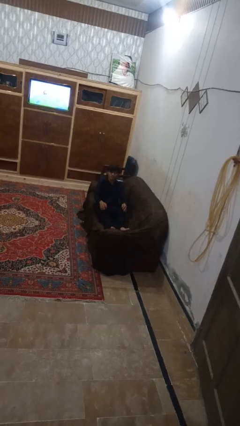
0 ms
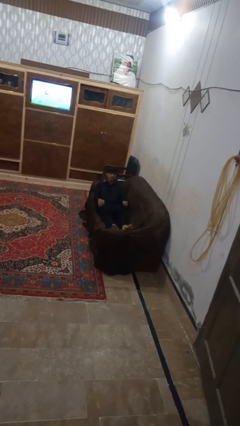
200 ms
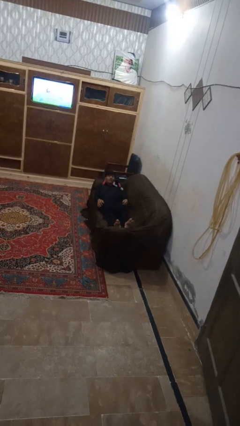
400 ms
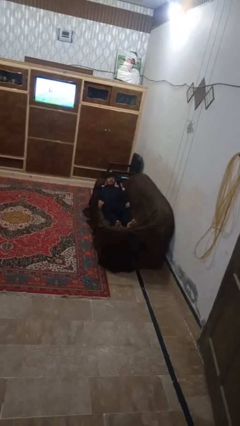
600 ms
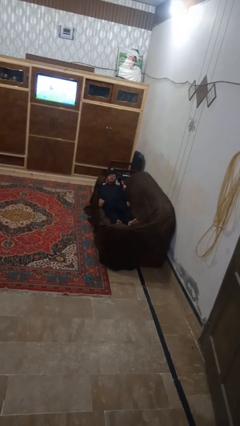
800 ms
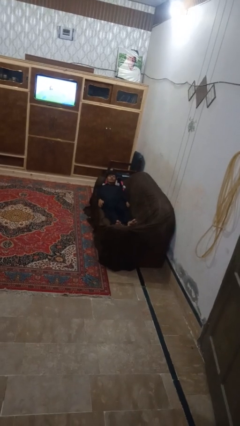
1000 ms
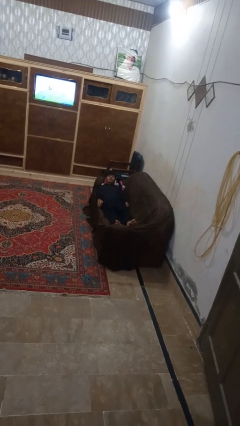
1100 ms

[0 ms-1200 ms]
person lies down on couch

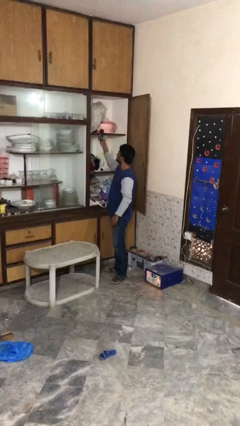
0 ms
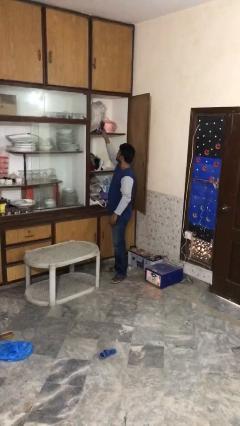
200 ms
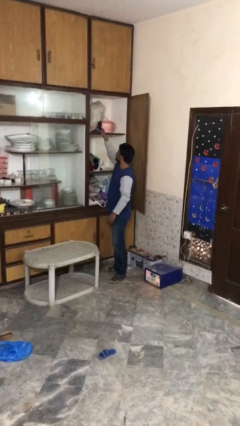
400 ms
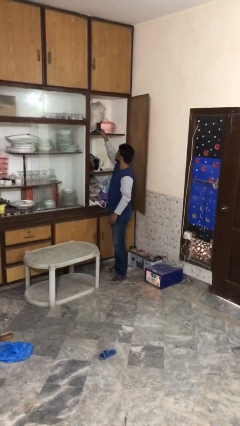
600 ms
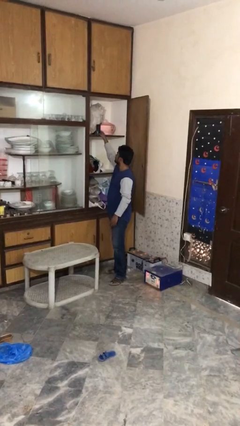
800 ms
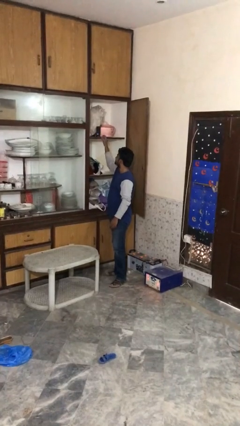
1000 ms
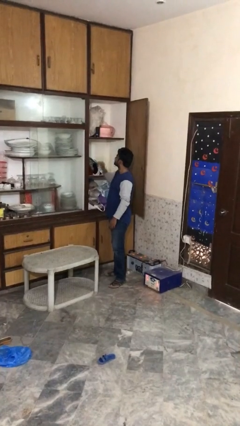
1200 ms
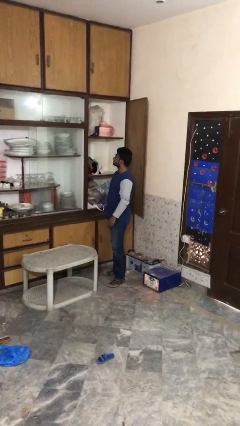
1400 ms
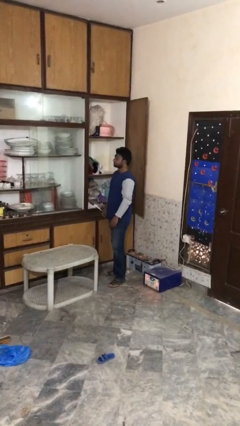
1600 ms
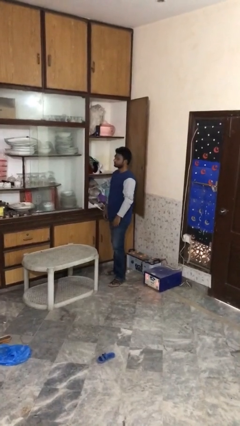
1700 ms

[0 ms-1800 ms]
person puts down object on shelf

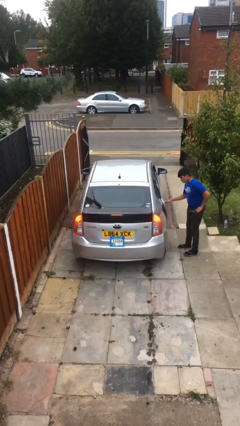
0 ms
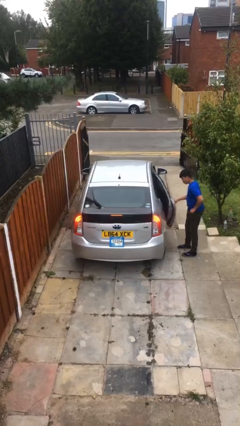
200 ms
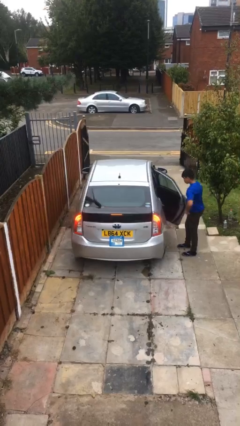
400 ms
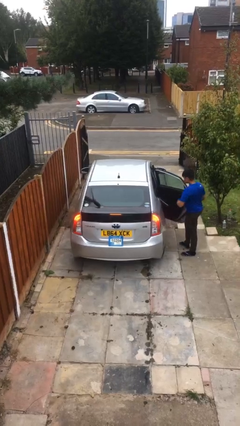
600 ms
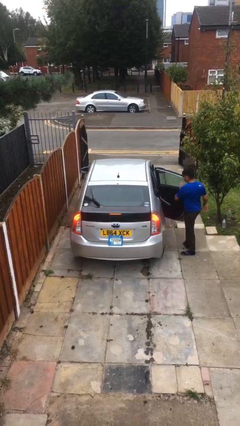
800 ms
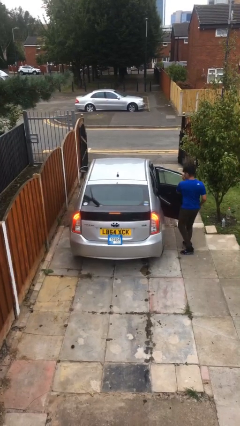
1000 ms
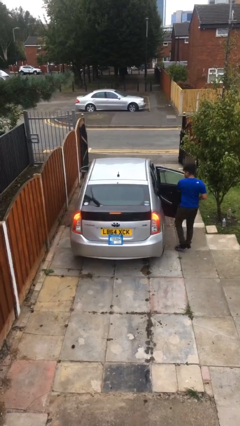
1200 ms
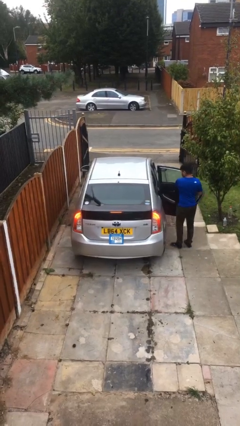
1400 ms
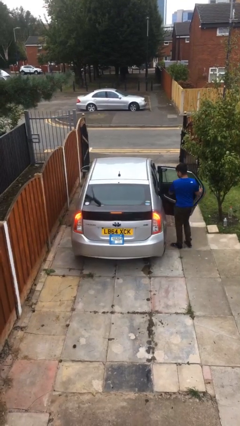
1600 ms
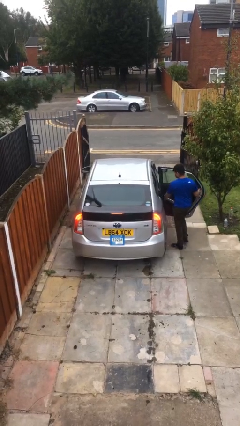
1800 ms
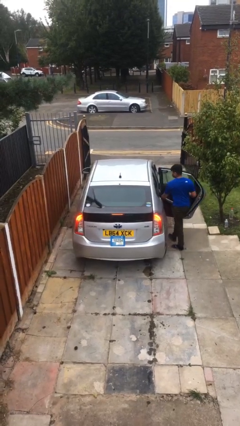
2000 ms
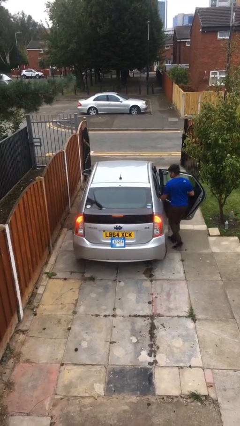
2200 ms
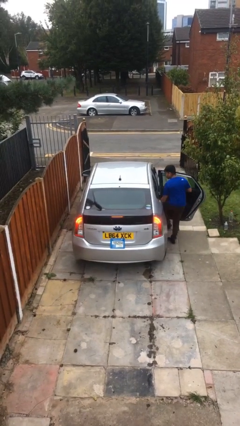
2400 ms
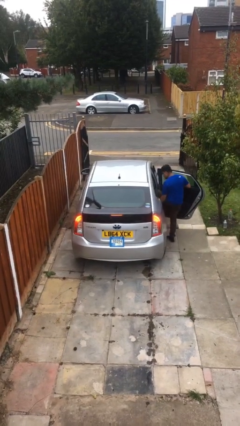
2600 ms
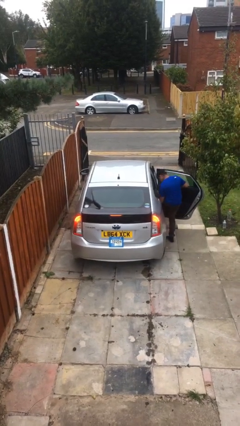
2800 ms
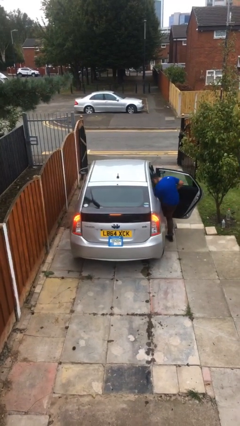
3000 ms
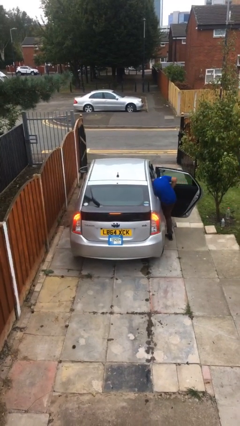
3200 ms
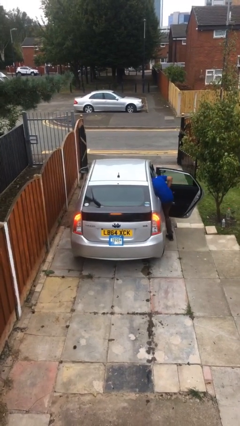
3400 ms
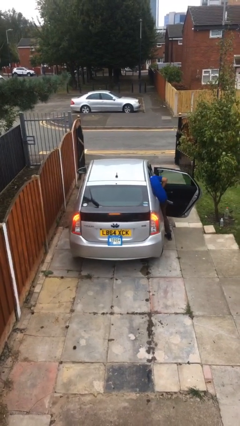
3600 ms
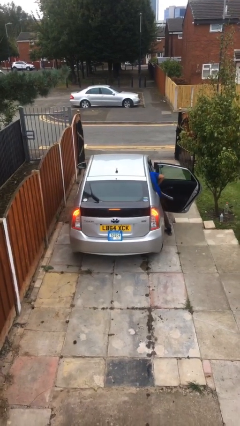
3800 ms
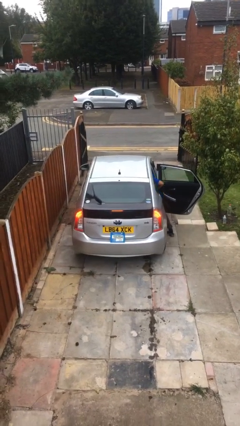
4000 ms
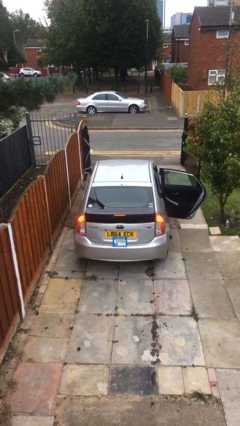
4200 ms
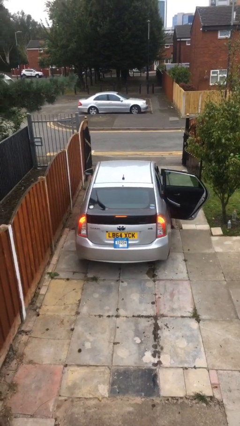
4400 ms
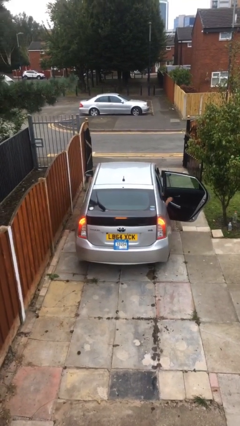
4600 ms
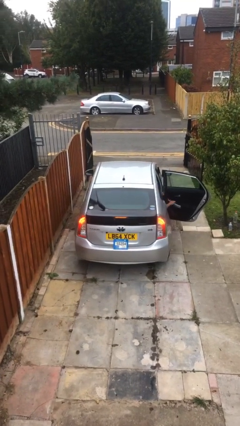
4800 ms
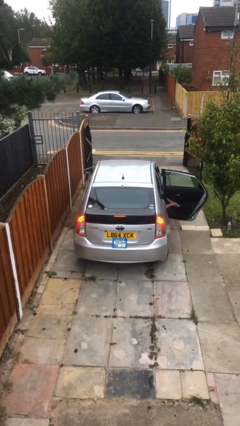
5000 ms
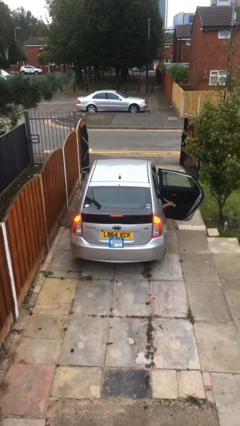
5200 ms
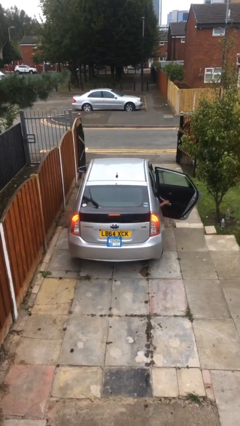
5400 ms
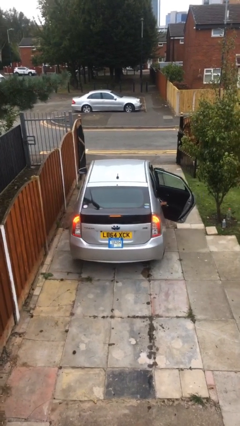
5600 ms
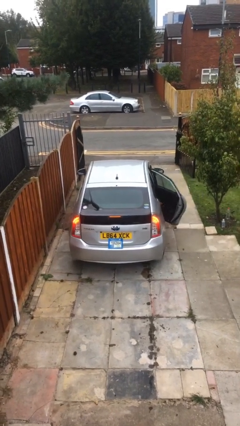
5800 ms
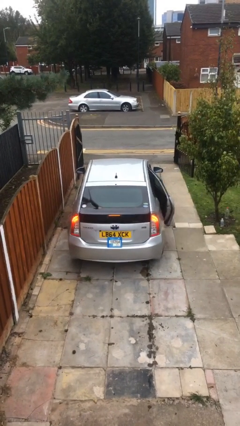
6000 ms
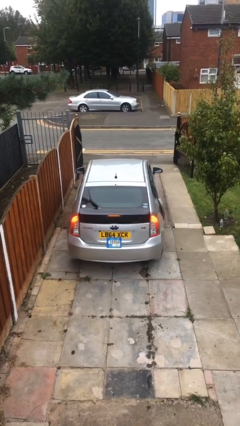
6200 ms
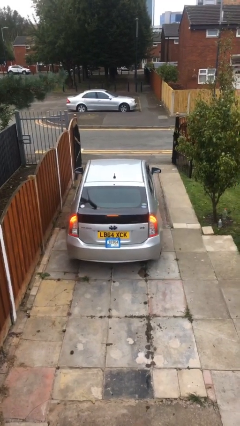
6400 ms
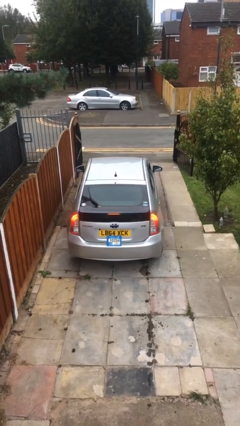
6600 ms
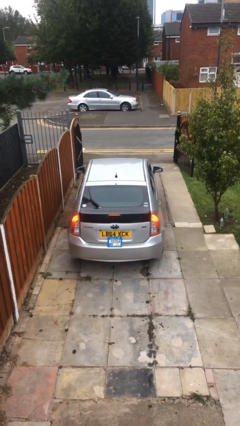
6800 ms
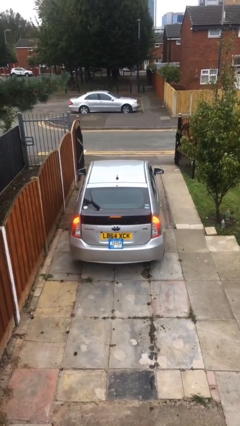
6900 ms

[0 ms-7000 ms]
car picks up person

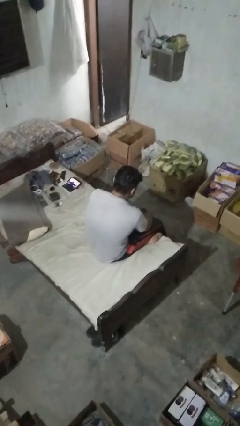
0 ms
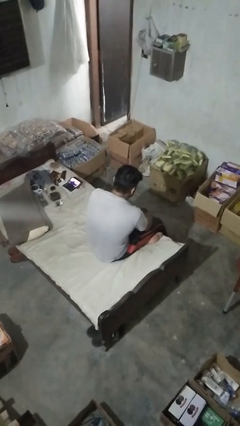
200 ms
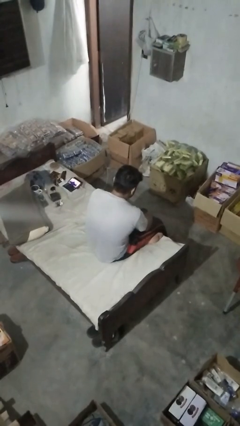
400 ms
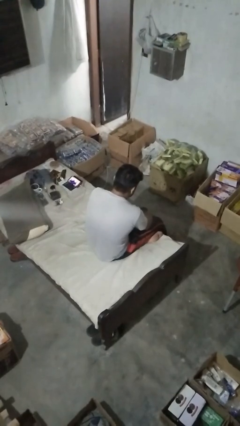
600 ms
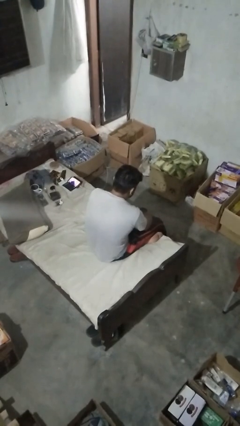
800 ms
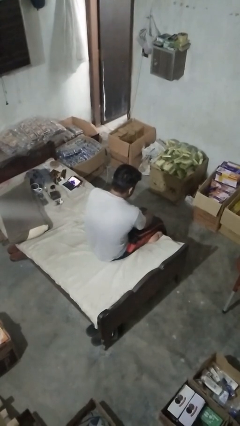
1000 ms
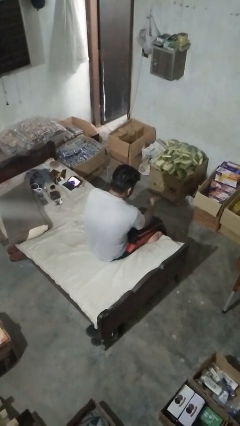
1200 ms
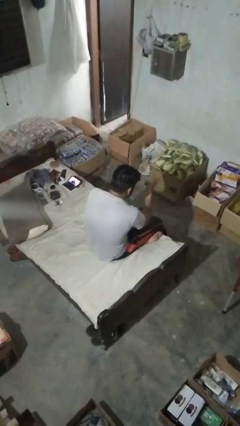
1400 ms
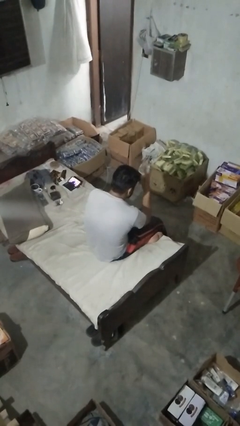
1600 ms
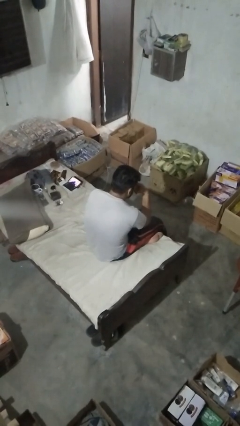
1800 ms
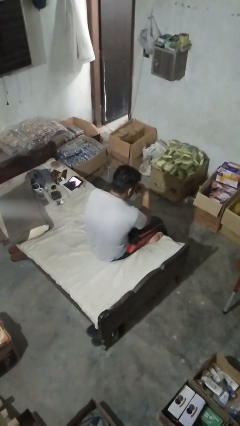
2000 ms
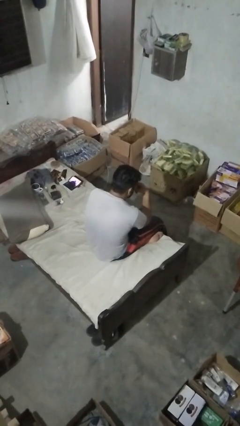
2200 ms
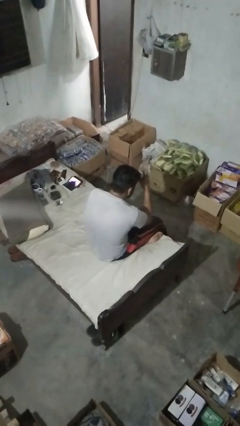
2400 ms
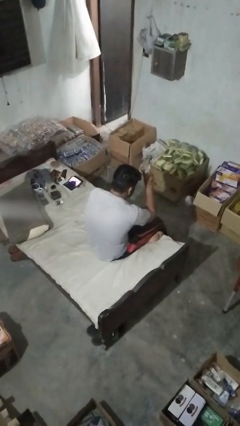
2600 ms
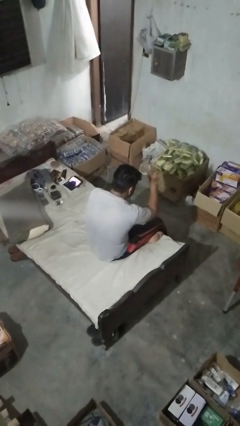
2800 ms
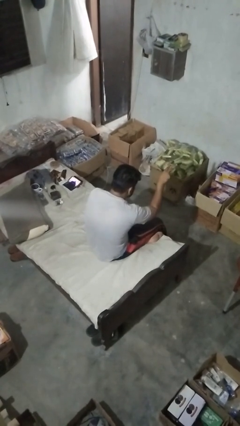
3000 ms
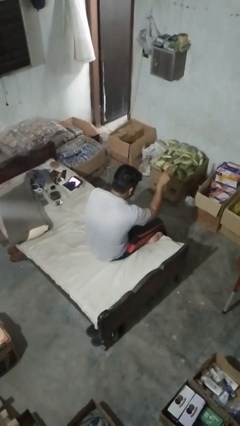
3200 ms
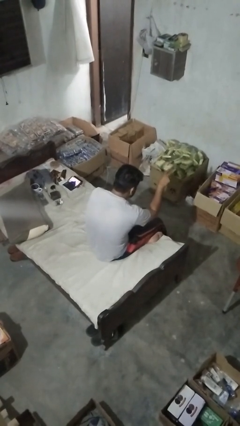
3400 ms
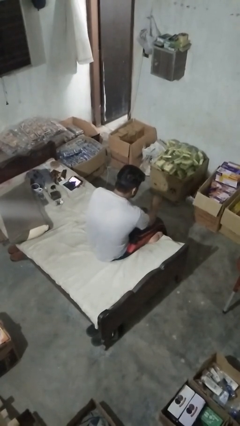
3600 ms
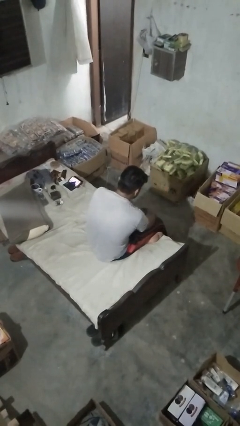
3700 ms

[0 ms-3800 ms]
person gestures watch closely

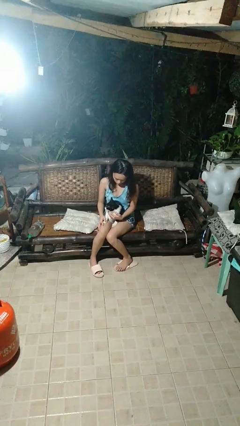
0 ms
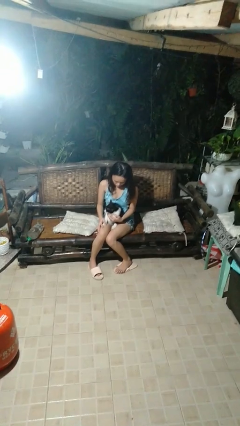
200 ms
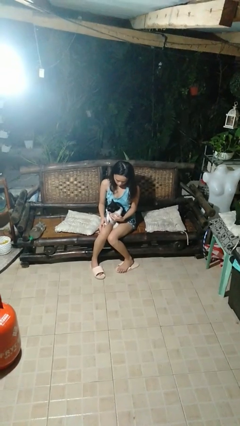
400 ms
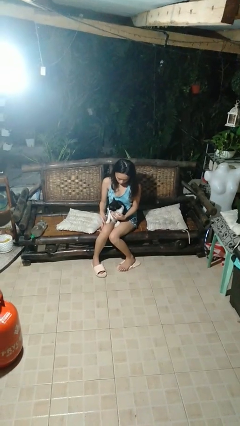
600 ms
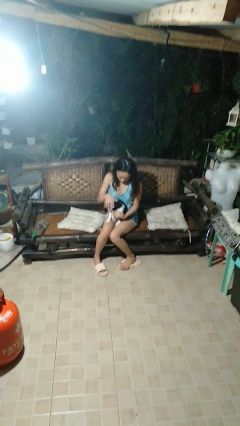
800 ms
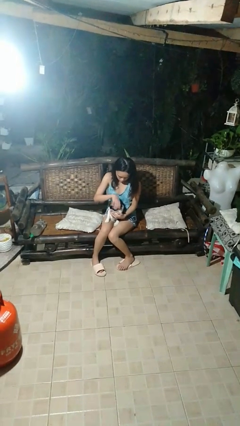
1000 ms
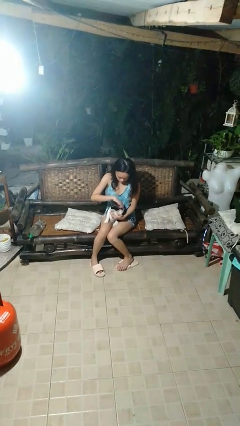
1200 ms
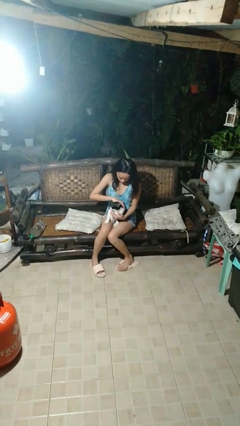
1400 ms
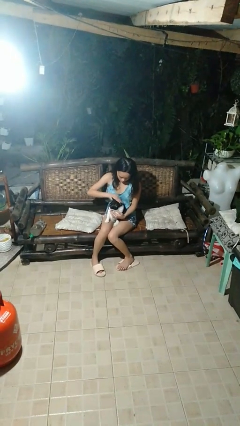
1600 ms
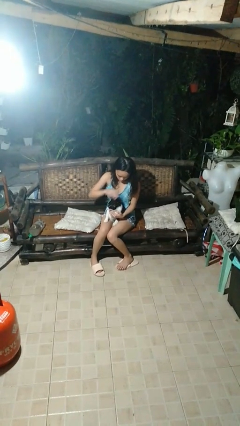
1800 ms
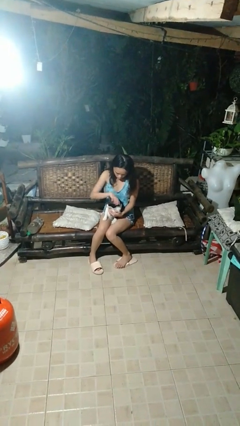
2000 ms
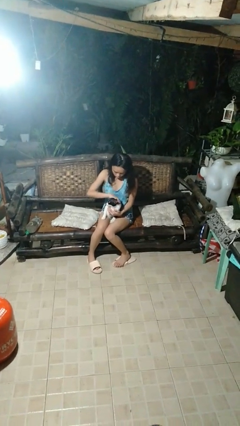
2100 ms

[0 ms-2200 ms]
person pets cat

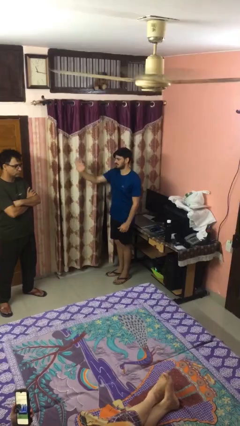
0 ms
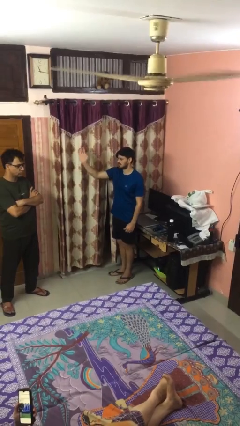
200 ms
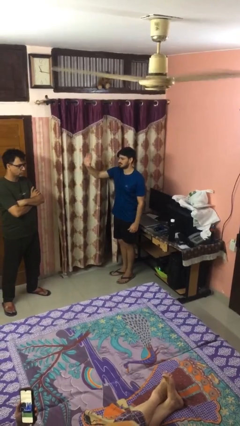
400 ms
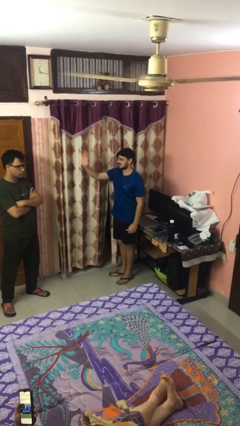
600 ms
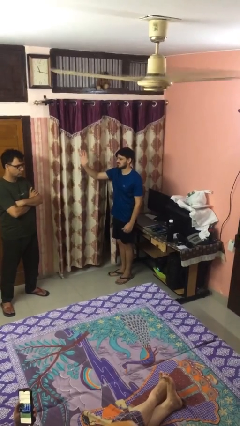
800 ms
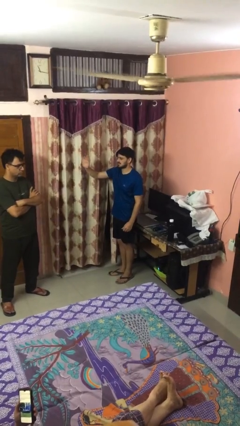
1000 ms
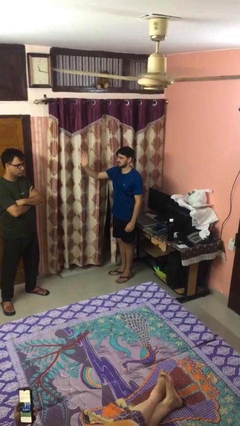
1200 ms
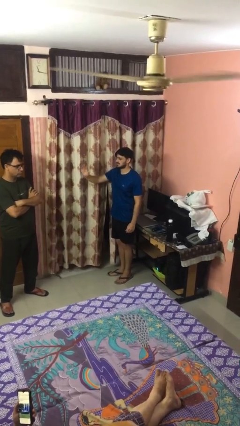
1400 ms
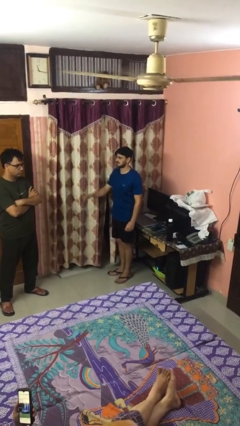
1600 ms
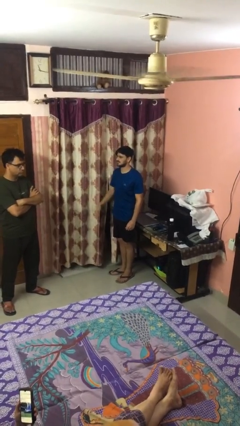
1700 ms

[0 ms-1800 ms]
person waves at person
